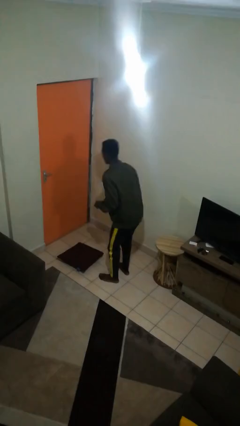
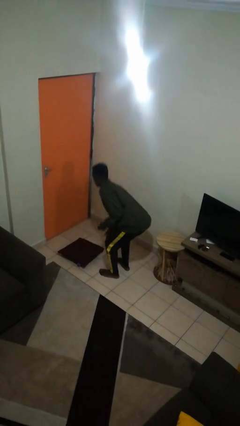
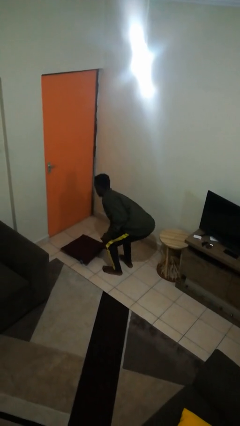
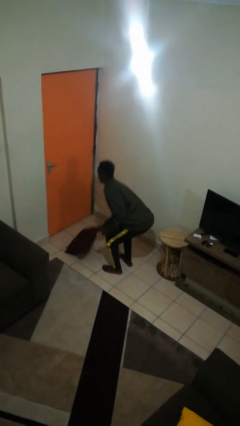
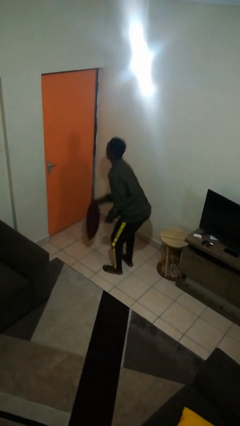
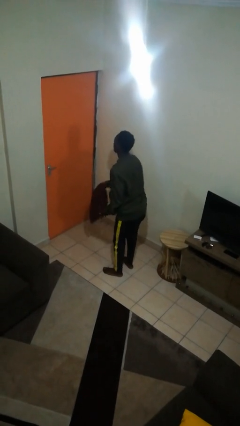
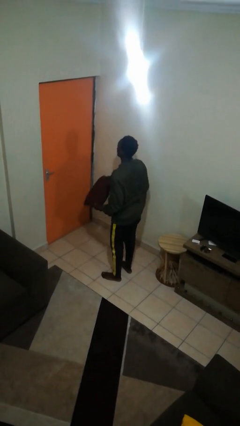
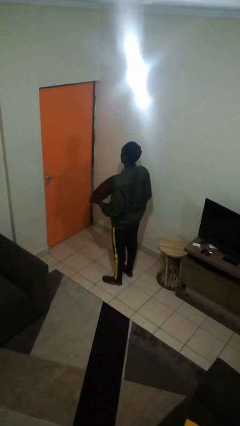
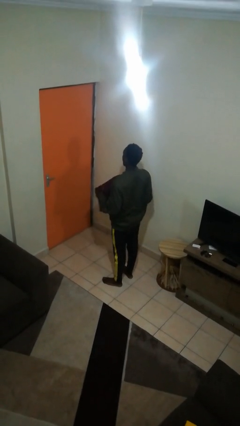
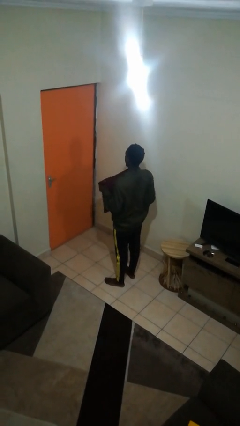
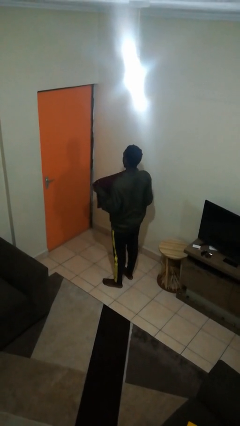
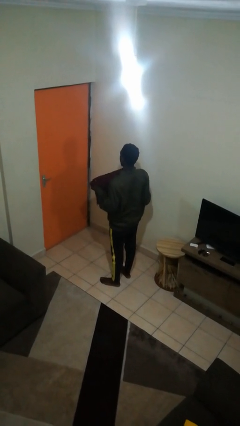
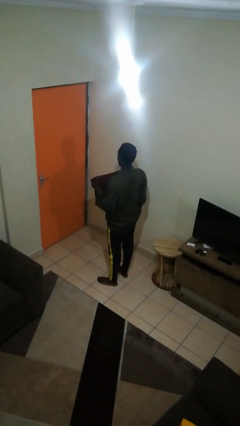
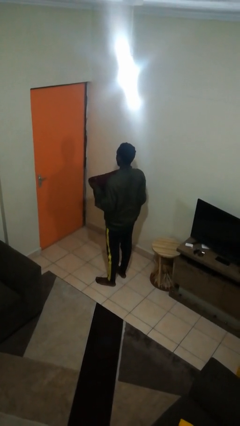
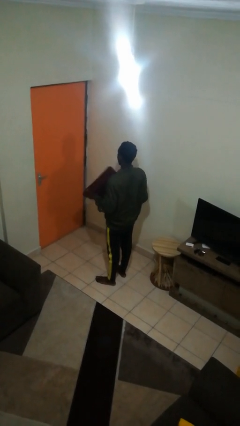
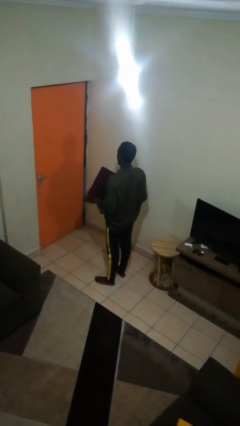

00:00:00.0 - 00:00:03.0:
person picks up object from floor

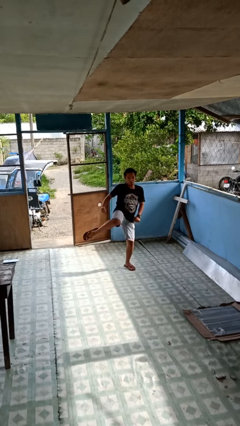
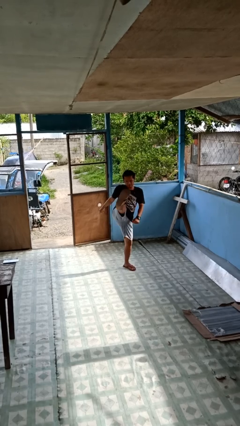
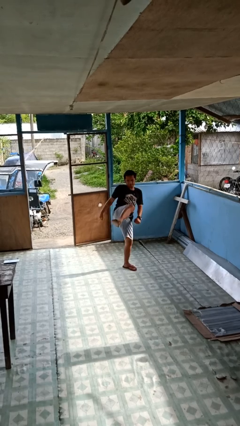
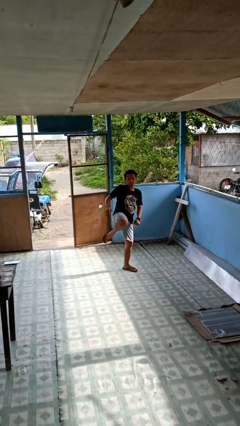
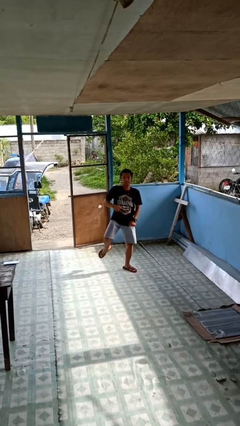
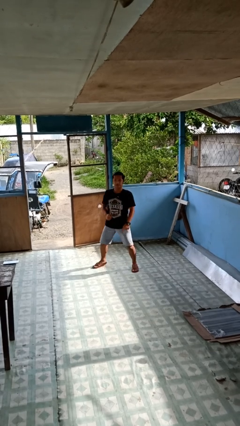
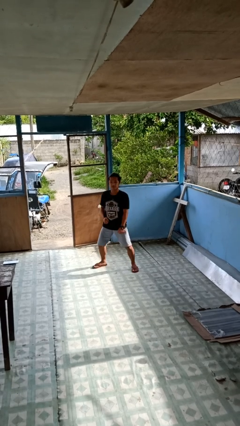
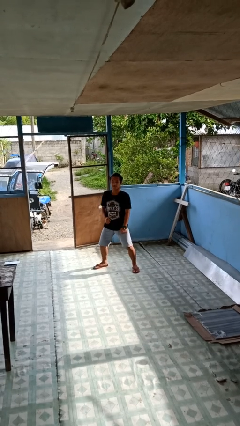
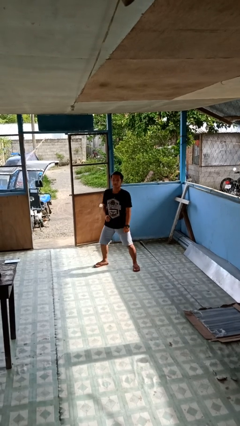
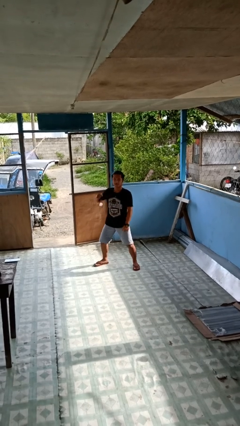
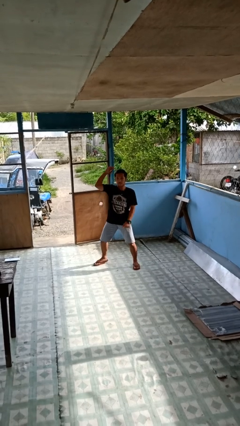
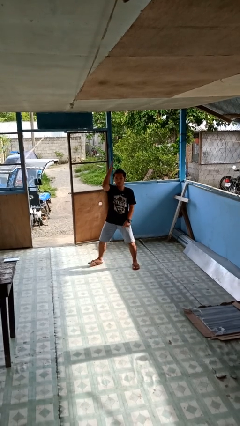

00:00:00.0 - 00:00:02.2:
person karate kicks

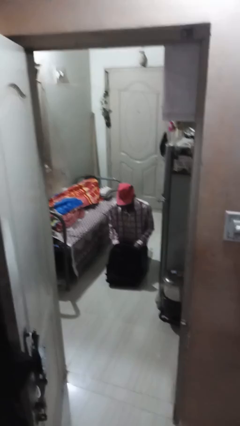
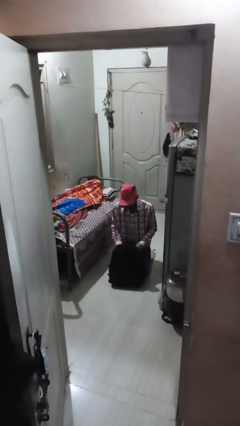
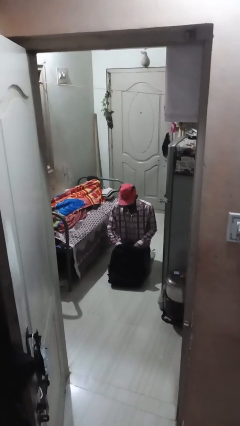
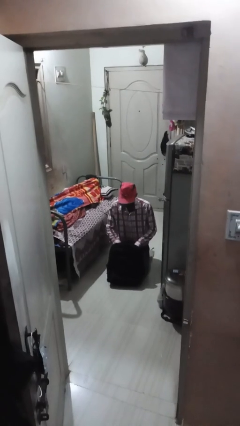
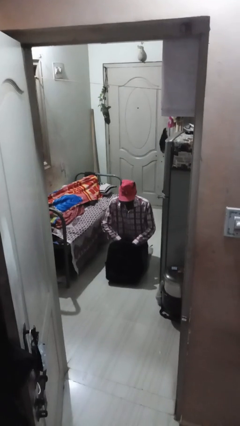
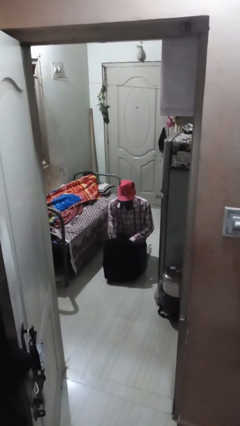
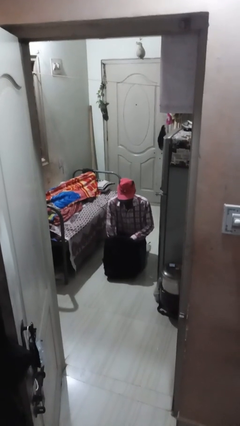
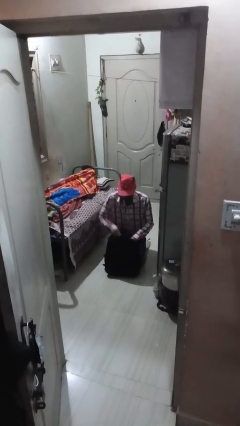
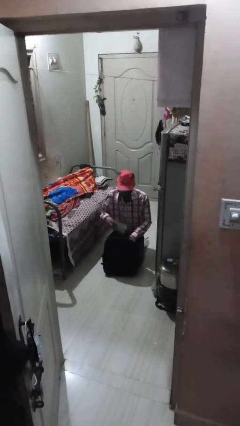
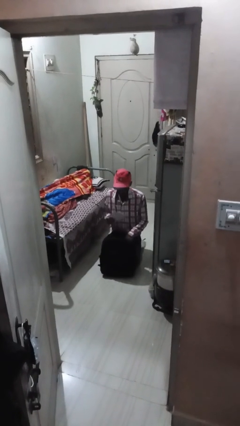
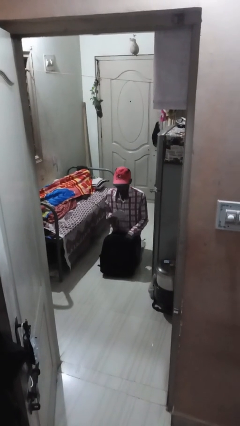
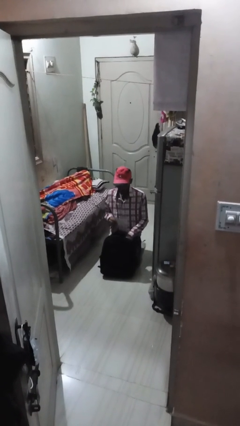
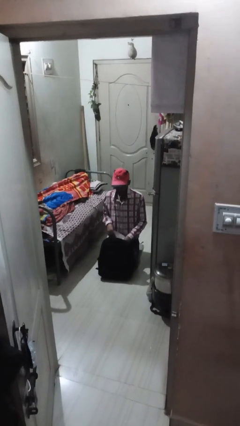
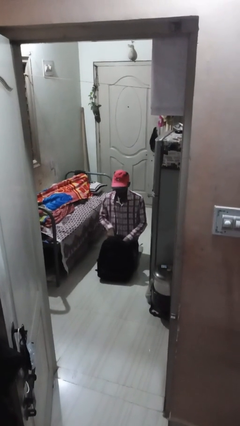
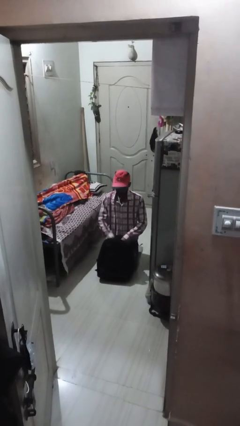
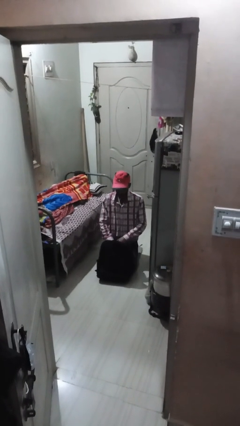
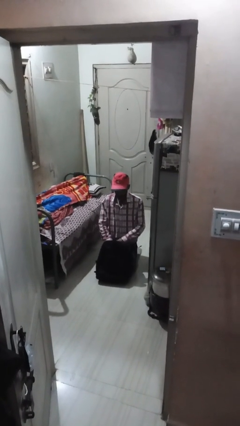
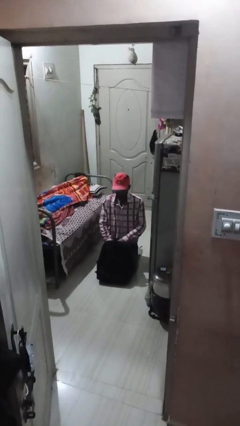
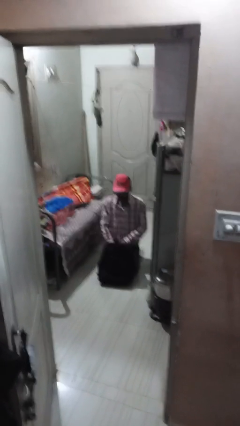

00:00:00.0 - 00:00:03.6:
person searches in backpack

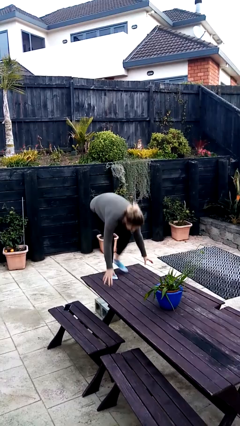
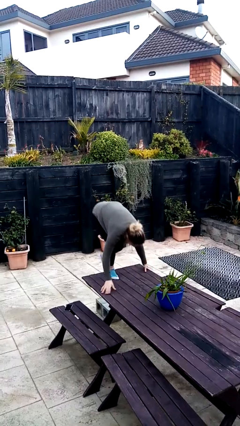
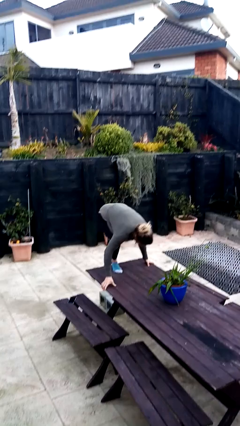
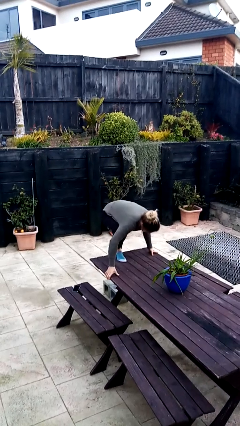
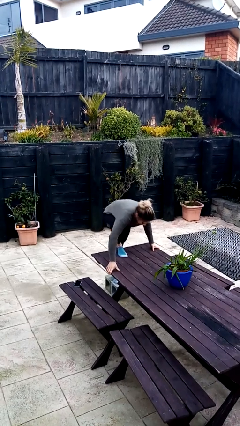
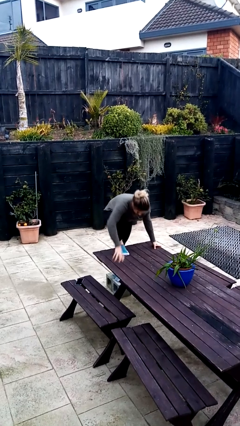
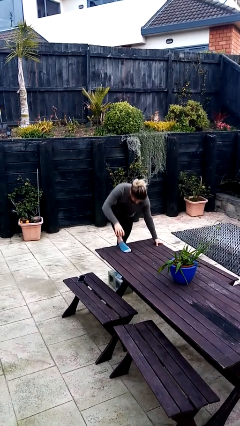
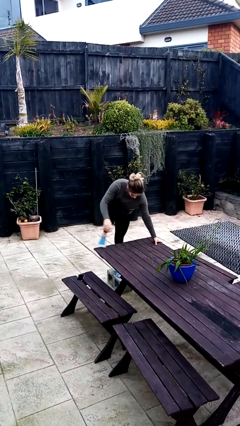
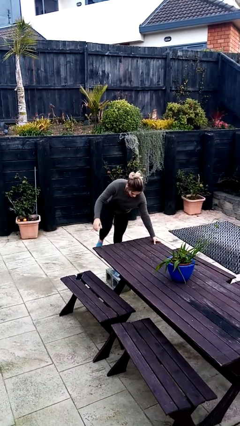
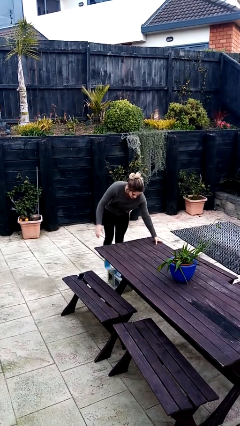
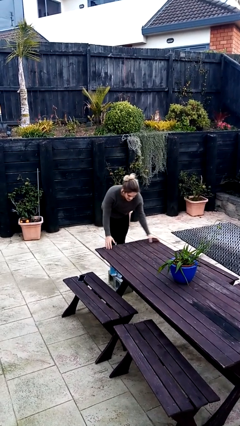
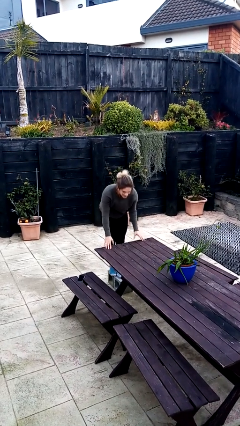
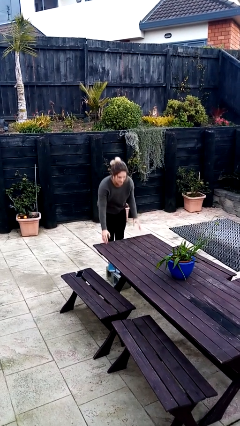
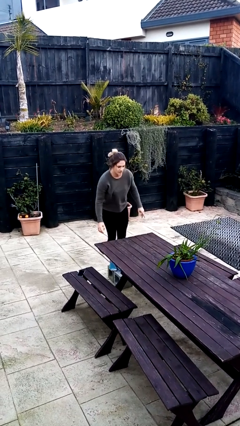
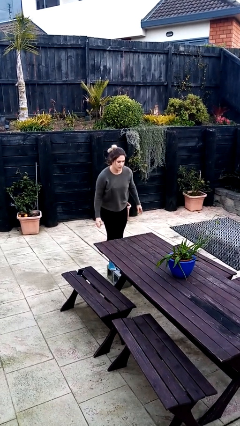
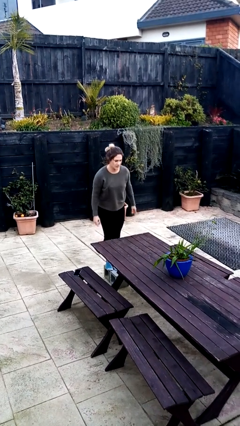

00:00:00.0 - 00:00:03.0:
person climbs off table

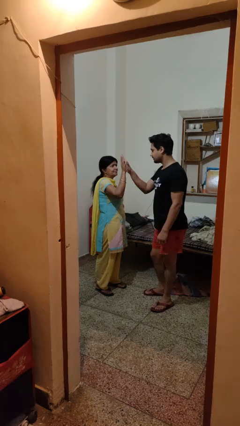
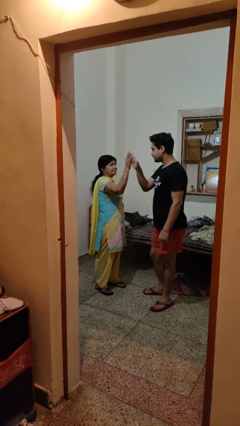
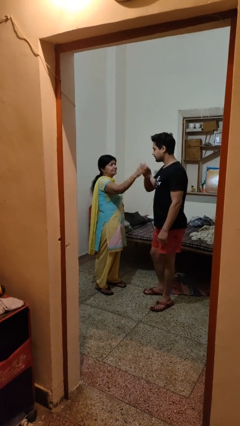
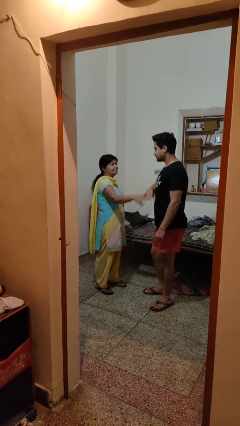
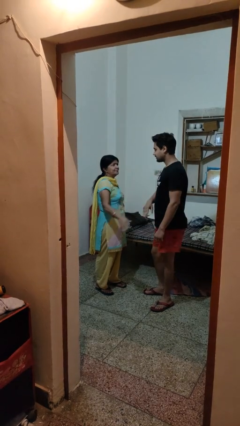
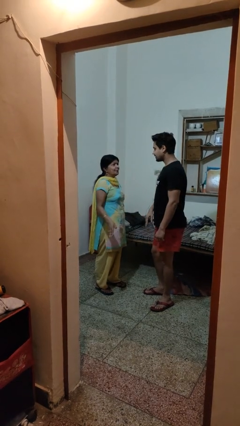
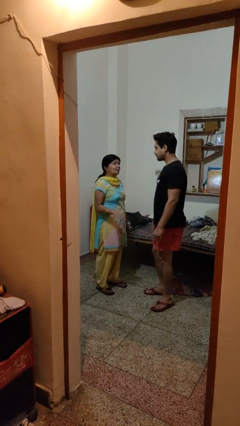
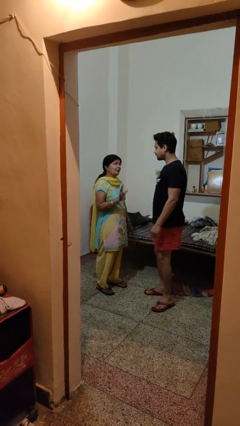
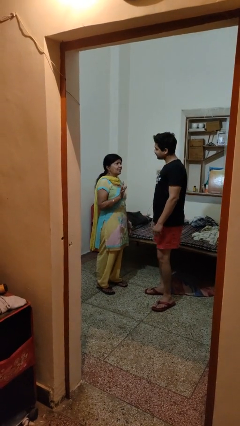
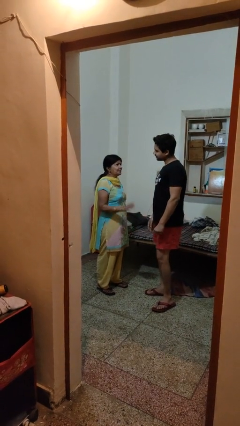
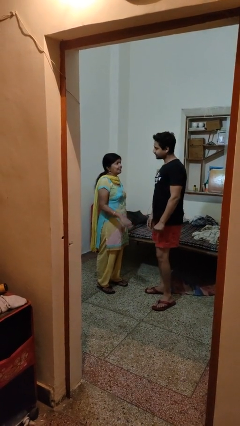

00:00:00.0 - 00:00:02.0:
person highfives hand

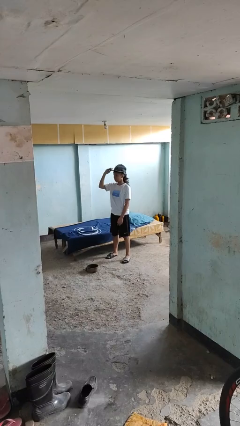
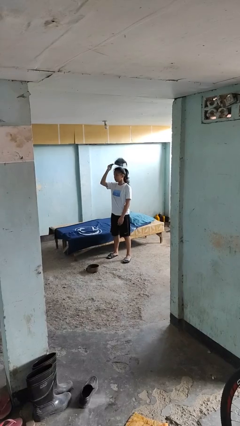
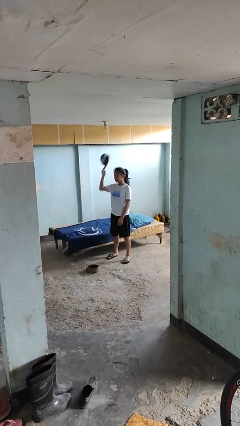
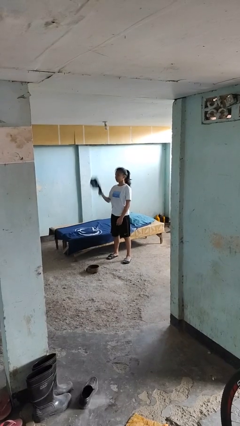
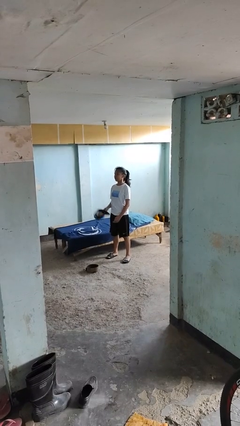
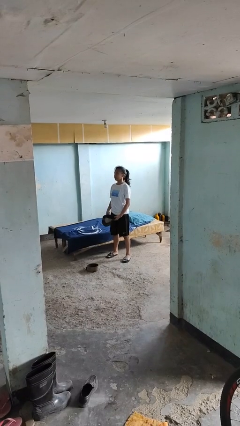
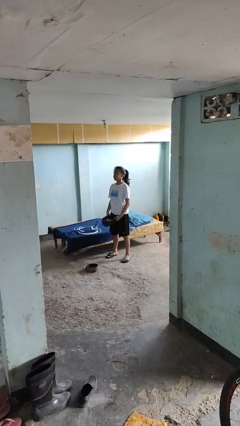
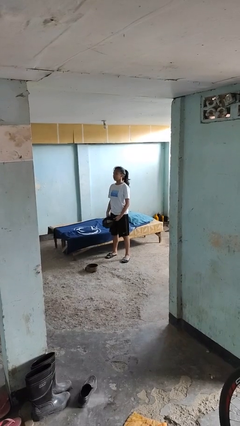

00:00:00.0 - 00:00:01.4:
person takes off hat

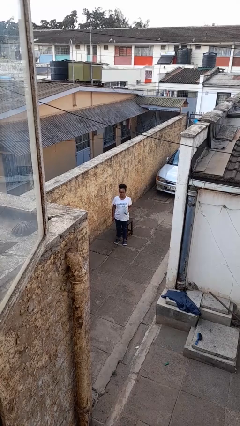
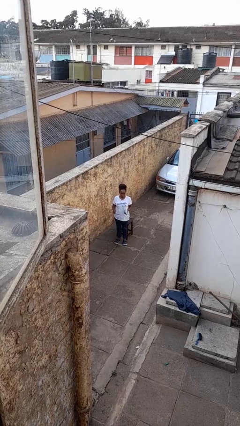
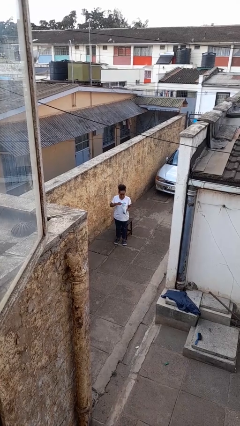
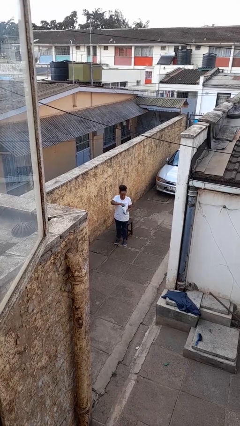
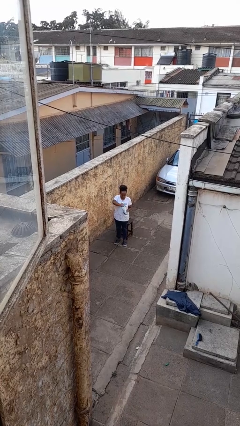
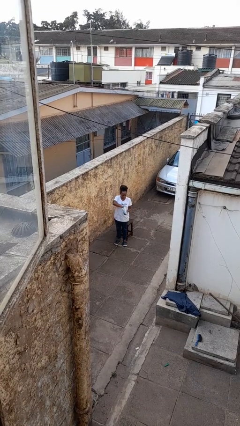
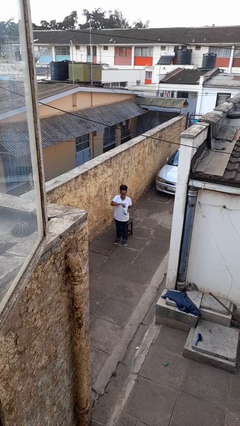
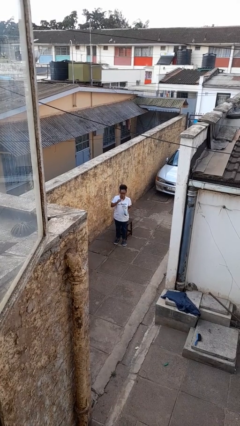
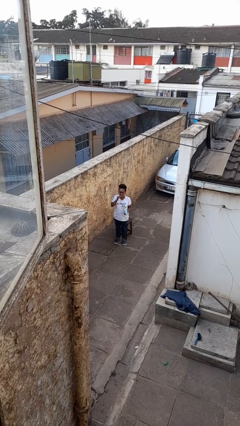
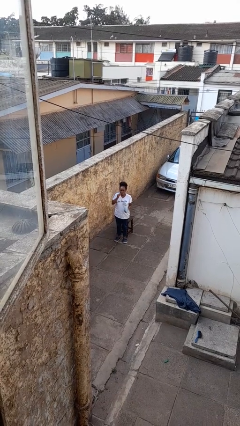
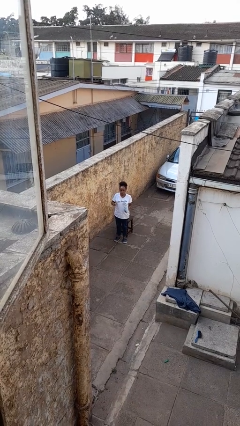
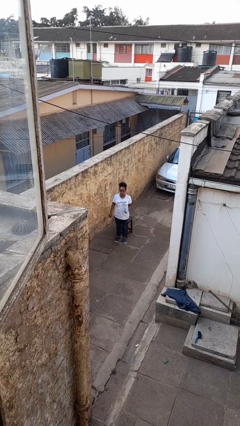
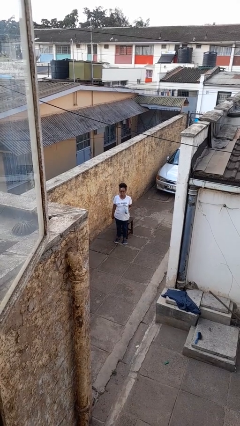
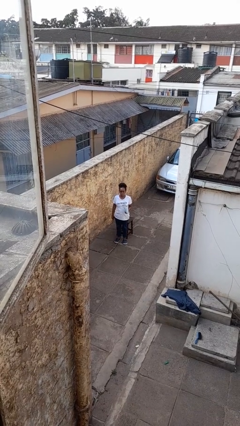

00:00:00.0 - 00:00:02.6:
person eats snack from bag
